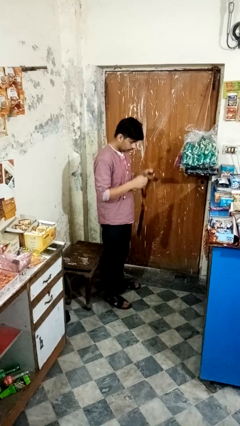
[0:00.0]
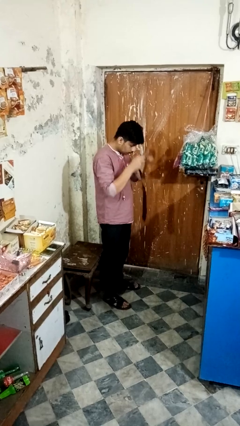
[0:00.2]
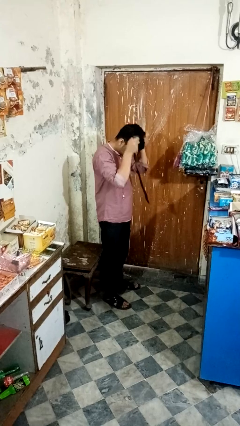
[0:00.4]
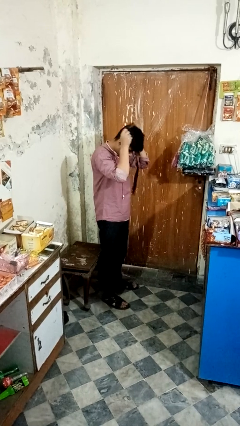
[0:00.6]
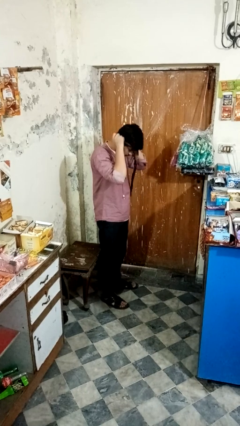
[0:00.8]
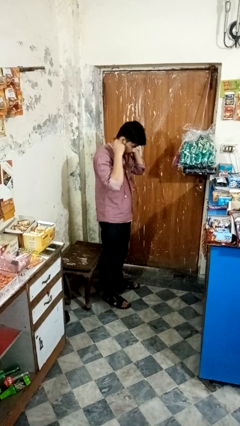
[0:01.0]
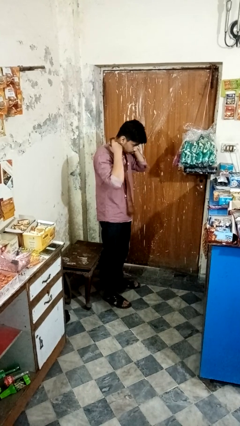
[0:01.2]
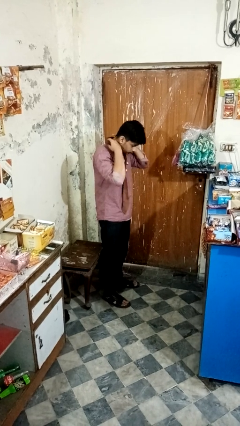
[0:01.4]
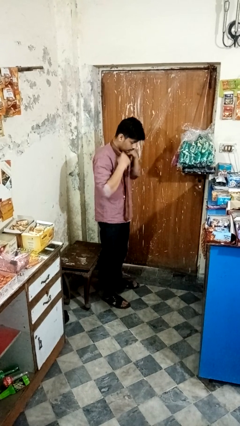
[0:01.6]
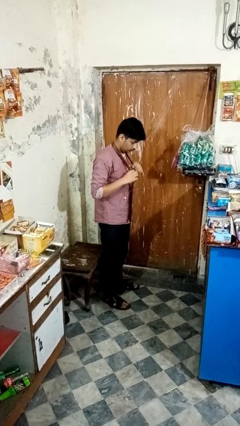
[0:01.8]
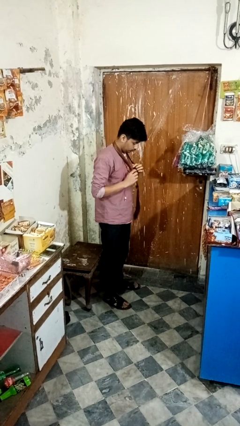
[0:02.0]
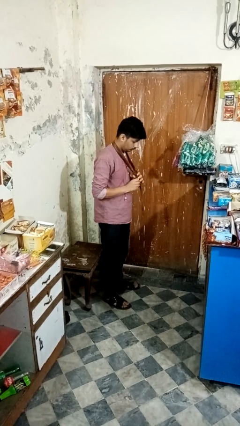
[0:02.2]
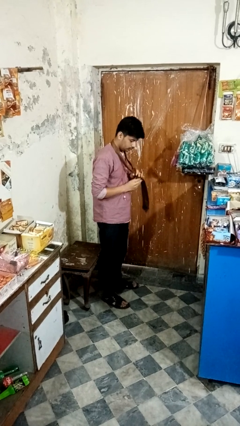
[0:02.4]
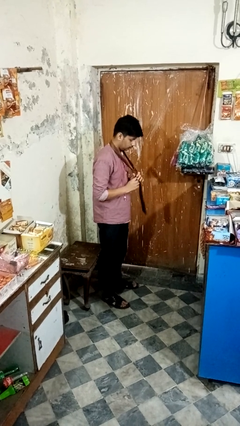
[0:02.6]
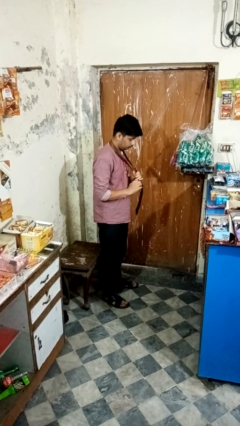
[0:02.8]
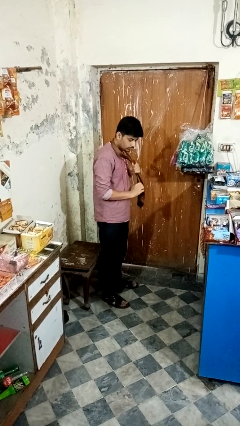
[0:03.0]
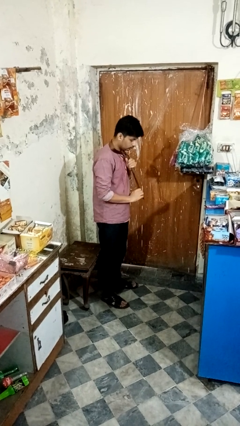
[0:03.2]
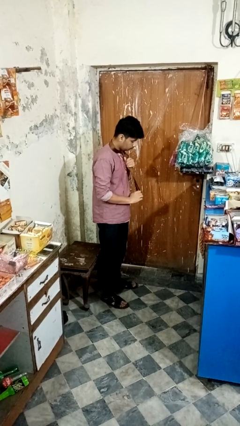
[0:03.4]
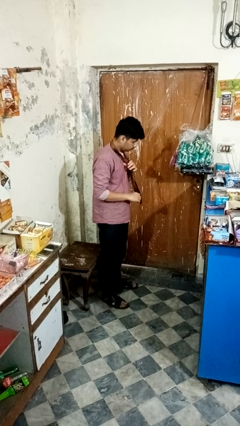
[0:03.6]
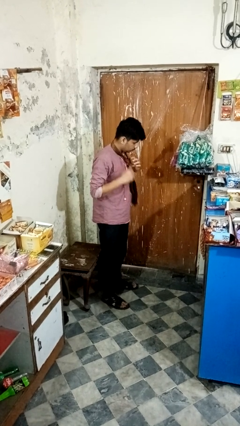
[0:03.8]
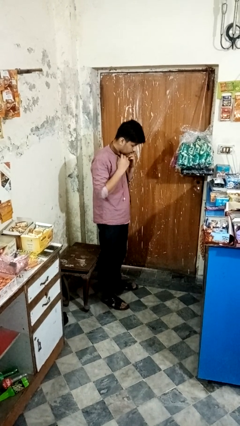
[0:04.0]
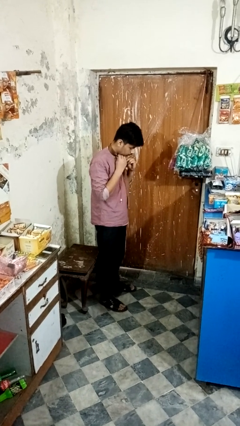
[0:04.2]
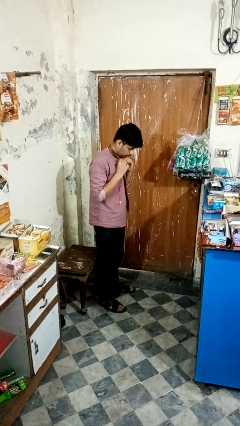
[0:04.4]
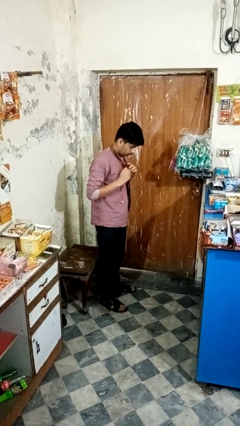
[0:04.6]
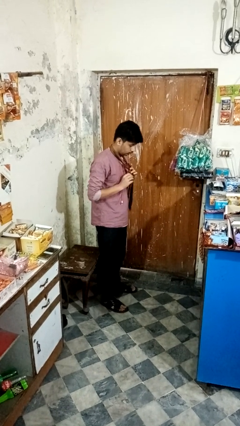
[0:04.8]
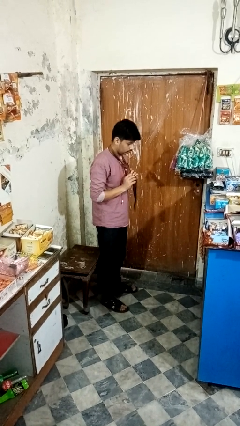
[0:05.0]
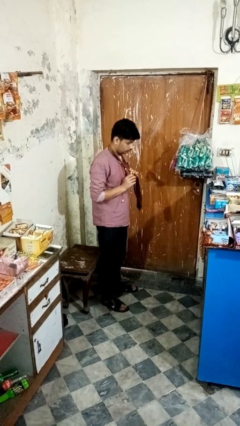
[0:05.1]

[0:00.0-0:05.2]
person puts on necktie

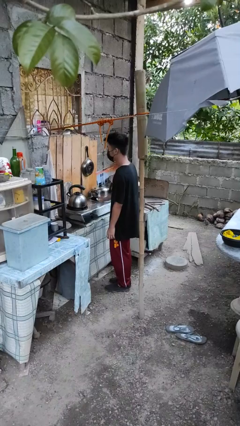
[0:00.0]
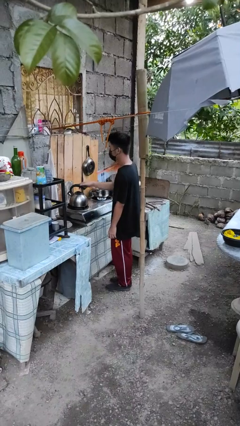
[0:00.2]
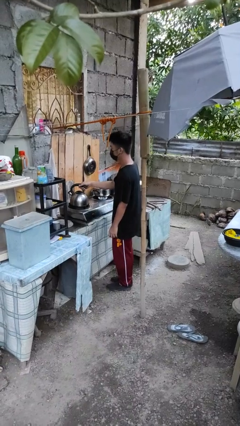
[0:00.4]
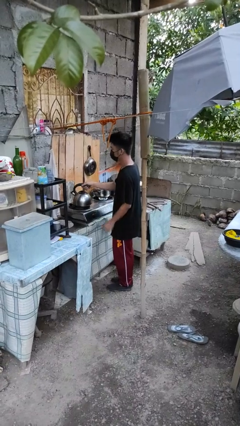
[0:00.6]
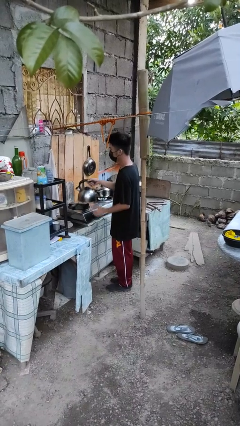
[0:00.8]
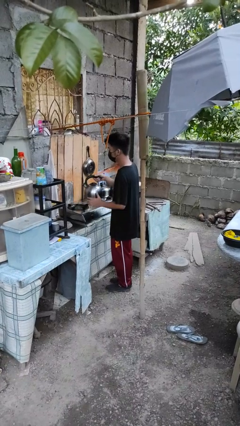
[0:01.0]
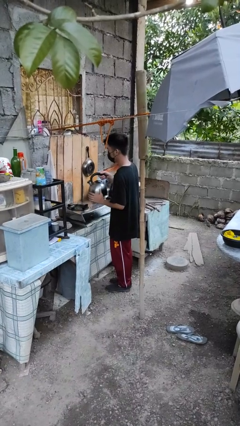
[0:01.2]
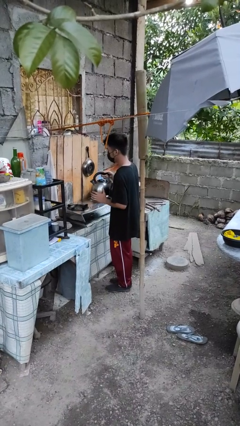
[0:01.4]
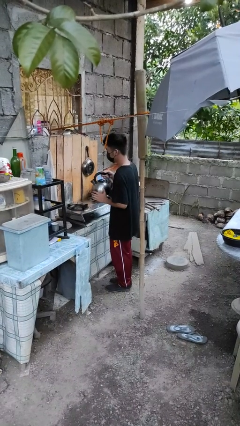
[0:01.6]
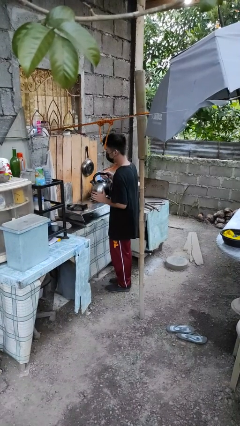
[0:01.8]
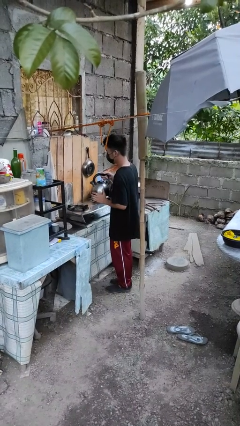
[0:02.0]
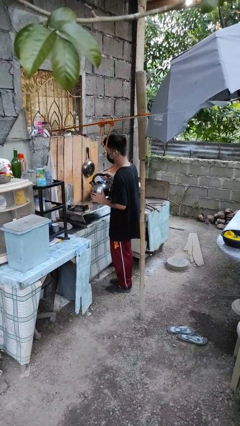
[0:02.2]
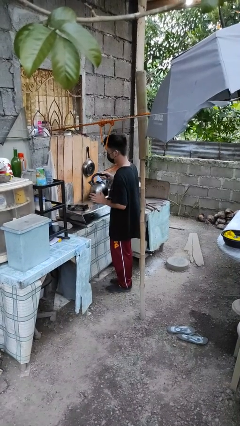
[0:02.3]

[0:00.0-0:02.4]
person picks up object from countertop

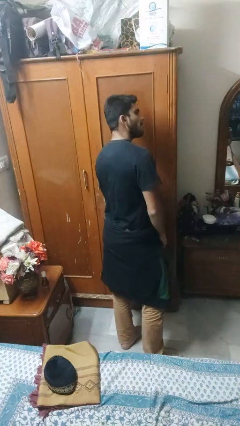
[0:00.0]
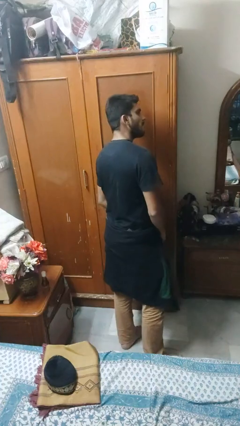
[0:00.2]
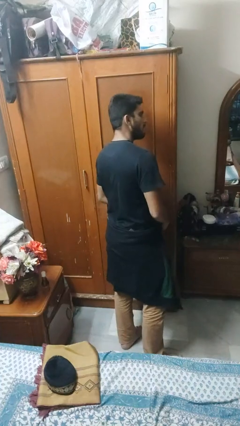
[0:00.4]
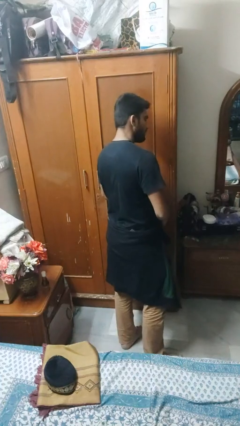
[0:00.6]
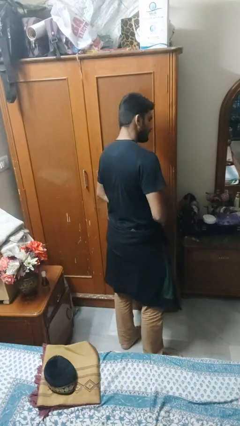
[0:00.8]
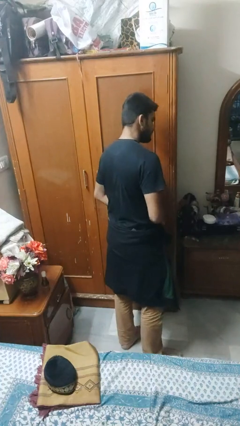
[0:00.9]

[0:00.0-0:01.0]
person unties jacket around waist

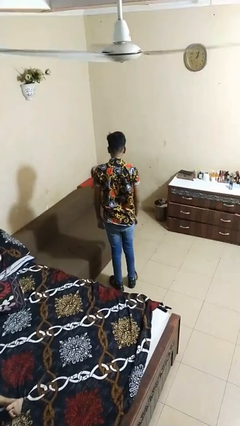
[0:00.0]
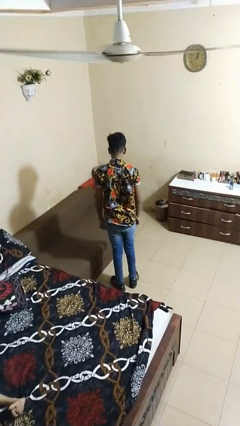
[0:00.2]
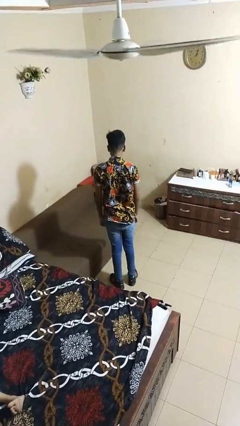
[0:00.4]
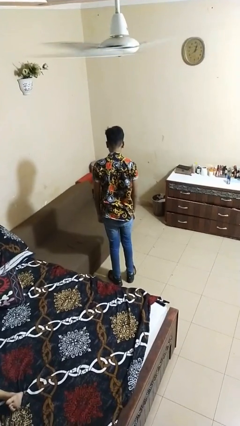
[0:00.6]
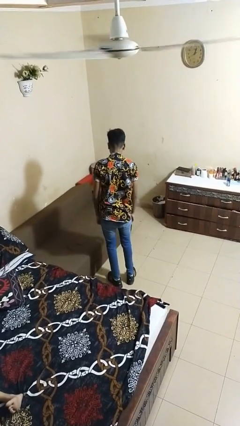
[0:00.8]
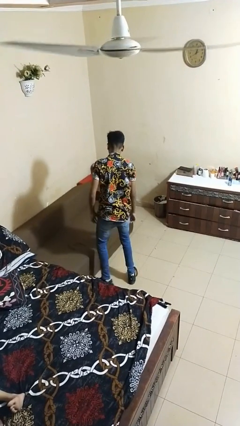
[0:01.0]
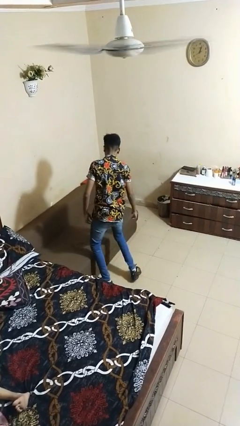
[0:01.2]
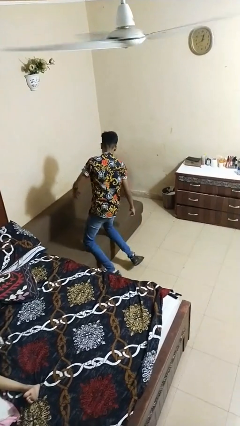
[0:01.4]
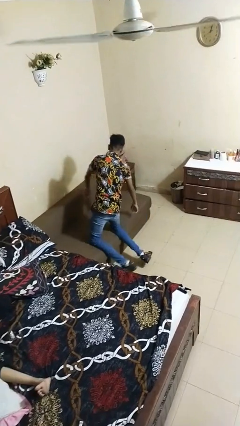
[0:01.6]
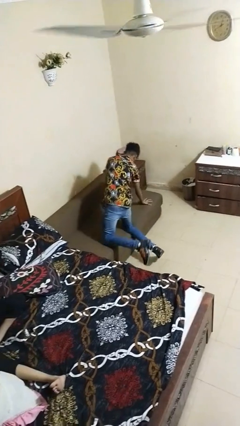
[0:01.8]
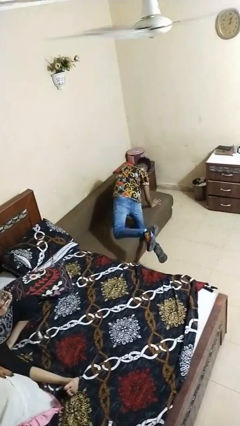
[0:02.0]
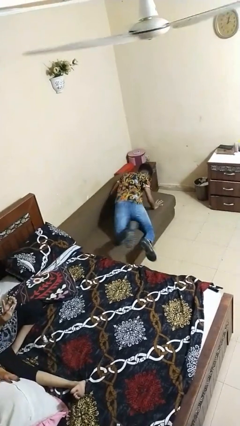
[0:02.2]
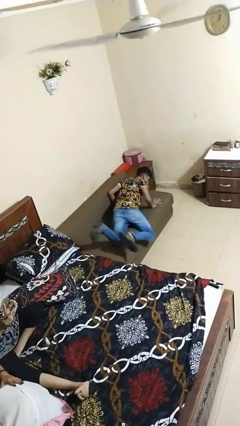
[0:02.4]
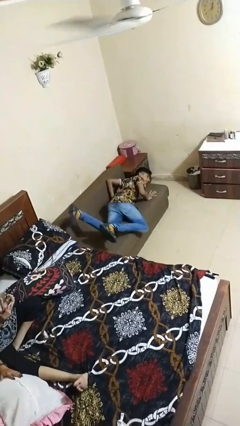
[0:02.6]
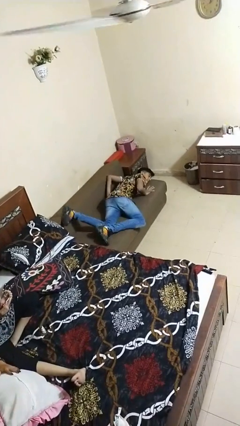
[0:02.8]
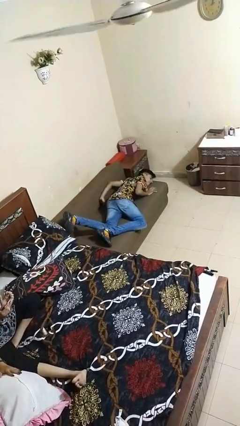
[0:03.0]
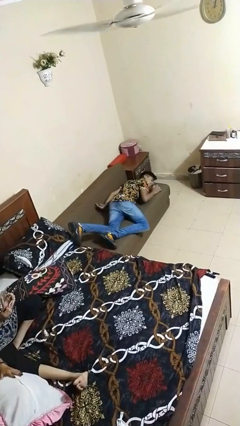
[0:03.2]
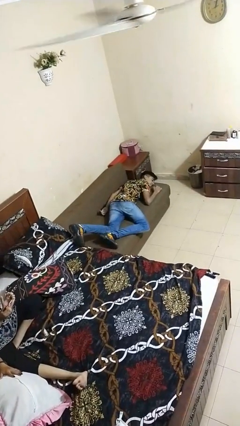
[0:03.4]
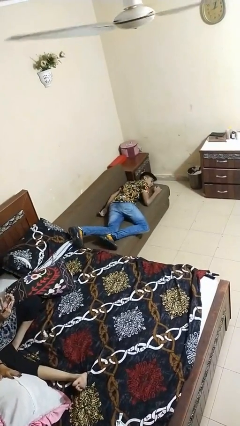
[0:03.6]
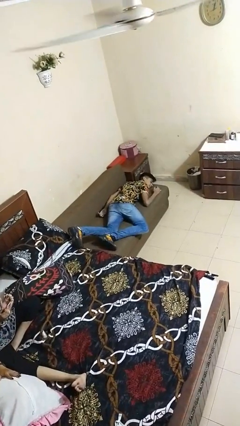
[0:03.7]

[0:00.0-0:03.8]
person lies down on bed

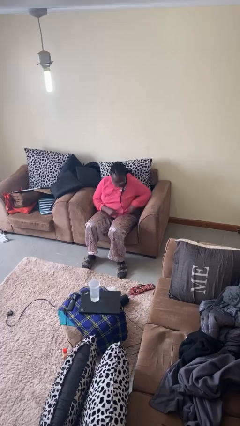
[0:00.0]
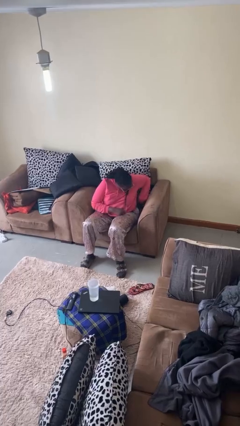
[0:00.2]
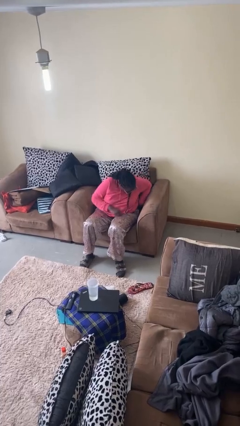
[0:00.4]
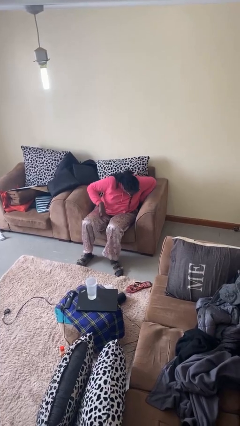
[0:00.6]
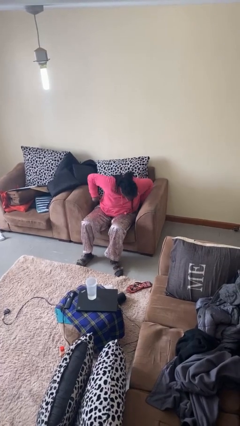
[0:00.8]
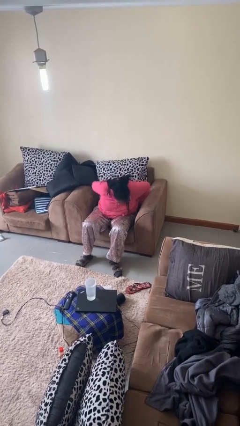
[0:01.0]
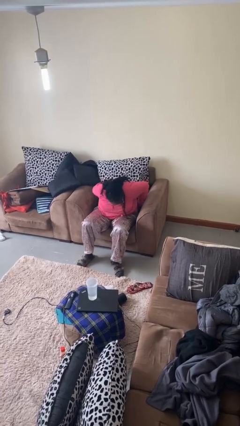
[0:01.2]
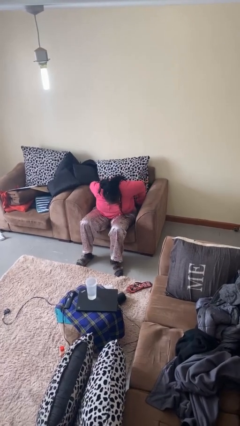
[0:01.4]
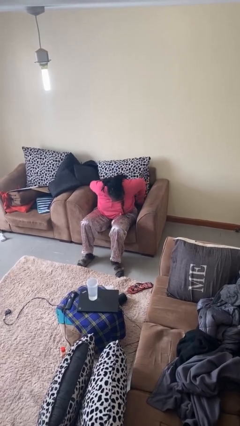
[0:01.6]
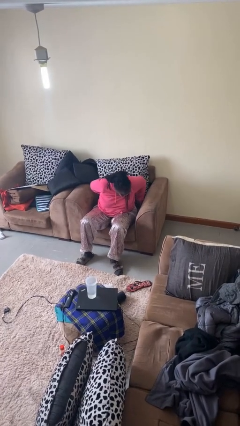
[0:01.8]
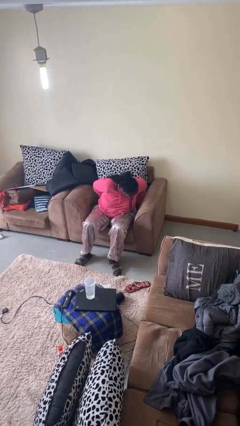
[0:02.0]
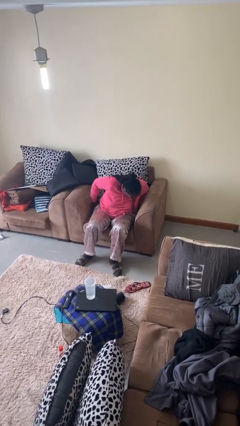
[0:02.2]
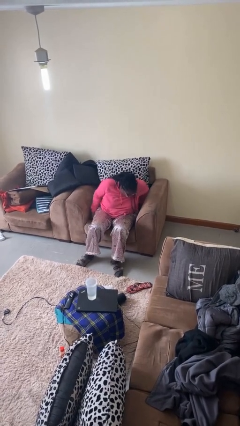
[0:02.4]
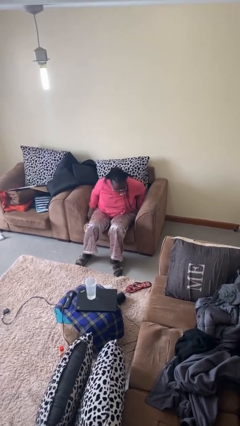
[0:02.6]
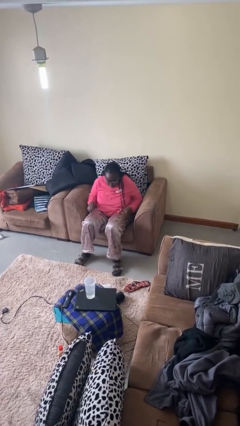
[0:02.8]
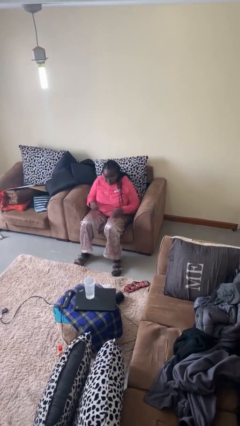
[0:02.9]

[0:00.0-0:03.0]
person searches in couch

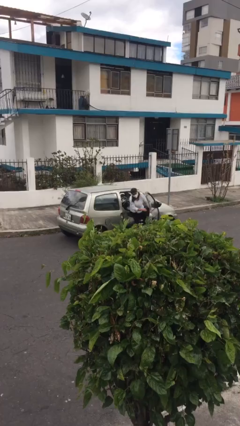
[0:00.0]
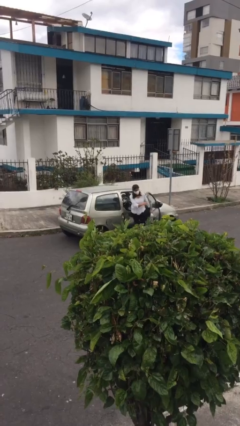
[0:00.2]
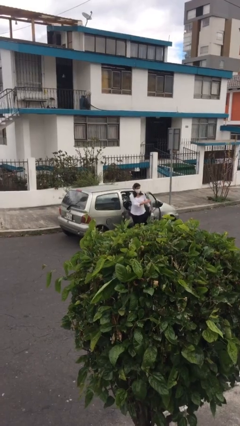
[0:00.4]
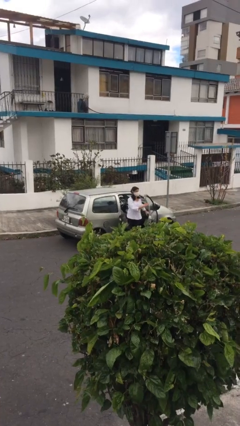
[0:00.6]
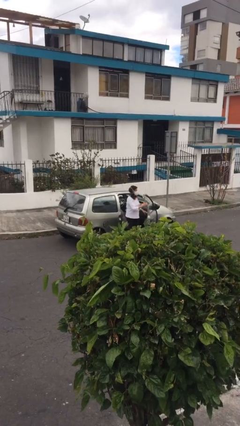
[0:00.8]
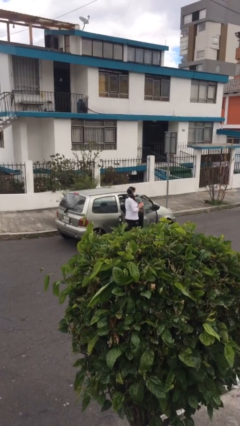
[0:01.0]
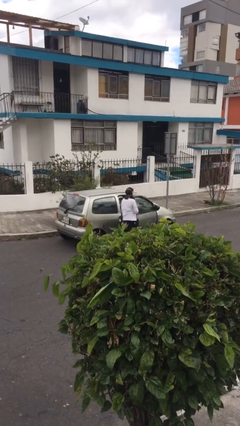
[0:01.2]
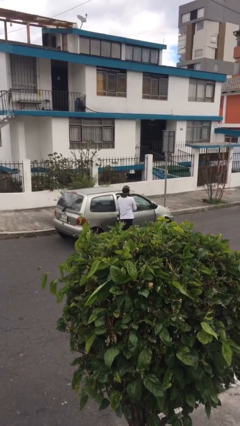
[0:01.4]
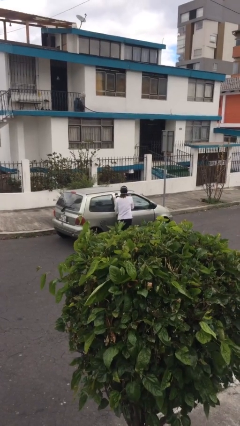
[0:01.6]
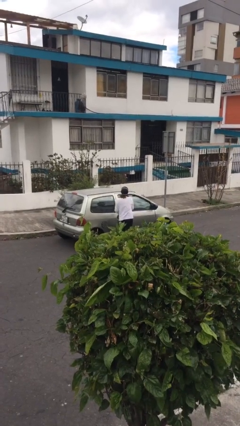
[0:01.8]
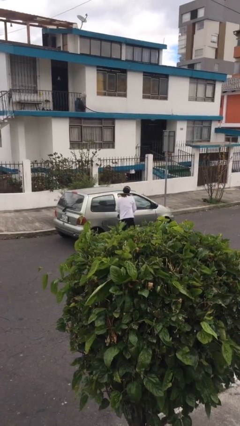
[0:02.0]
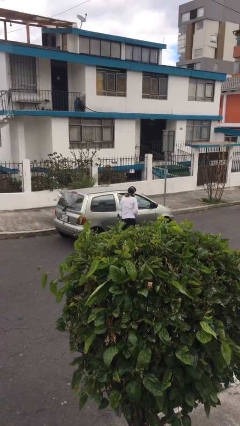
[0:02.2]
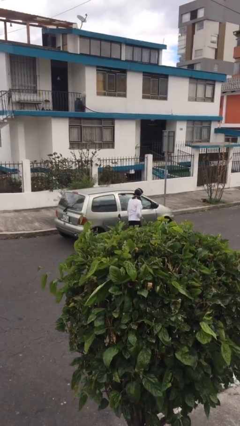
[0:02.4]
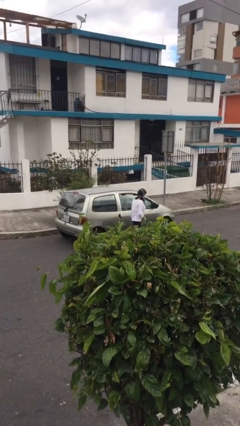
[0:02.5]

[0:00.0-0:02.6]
car drops off person
